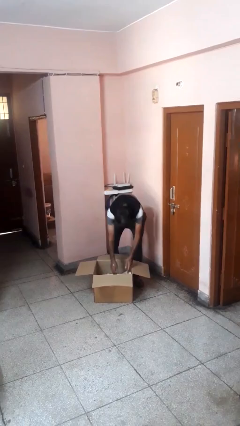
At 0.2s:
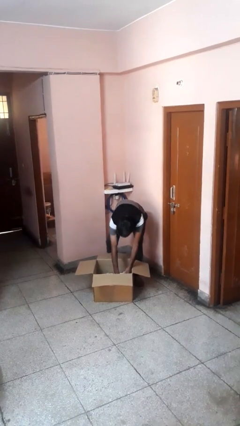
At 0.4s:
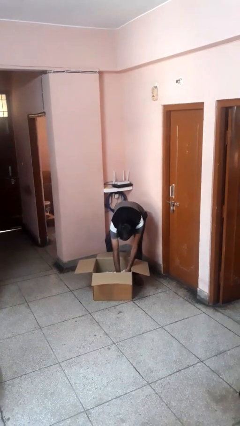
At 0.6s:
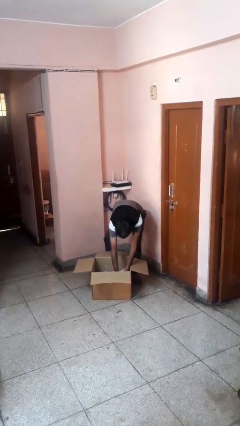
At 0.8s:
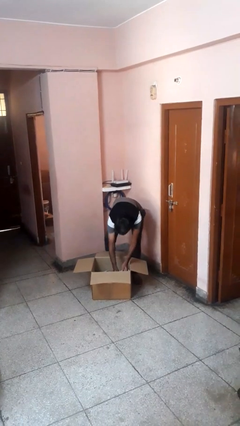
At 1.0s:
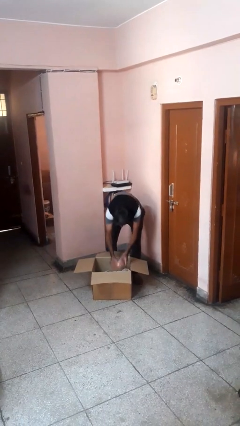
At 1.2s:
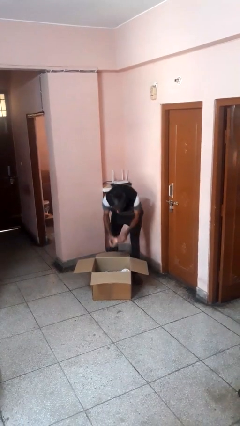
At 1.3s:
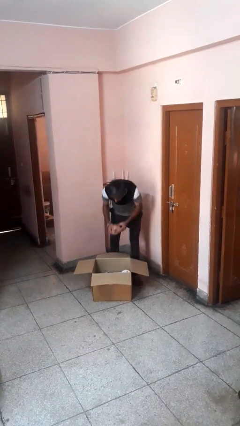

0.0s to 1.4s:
person takes object from box

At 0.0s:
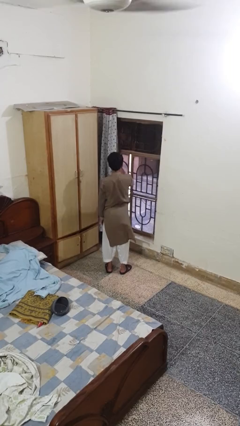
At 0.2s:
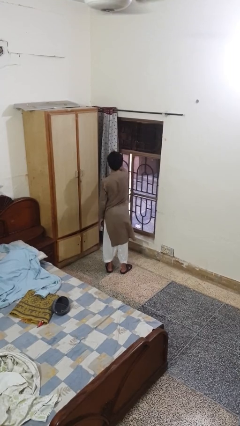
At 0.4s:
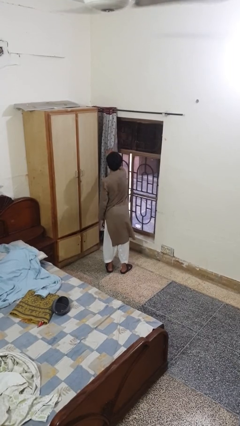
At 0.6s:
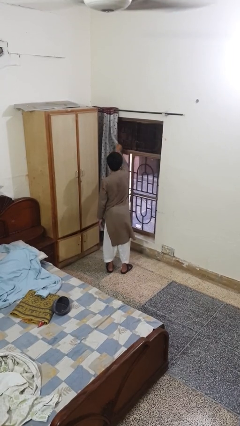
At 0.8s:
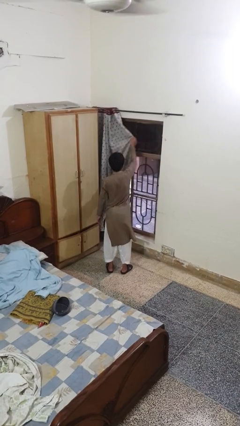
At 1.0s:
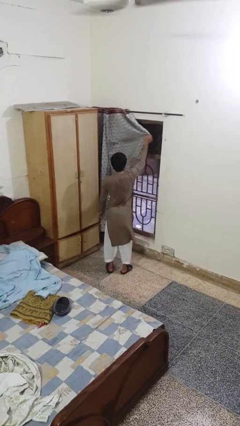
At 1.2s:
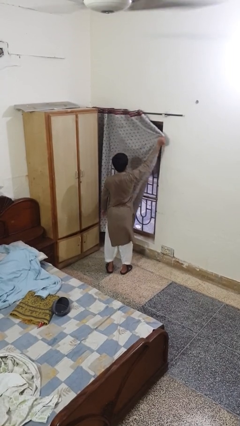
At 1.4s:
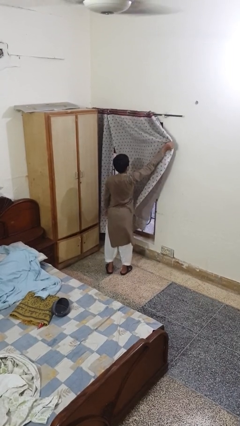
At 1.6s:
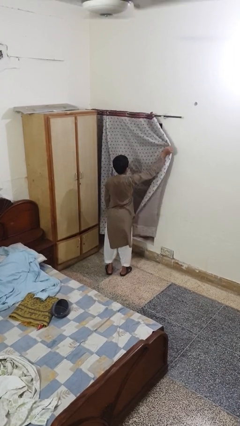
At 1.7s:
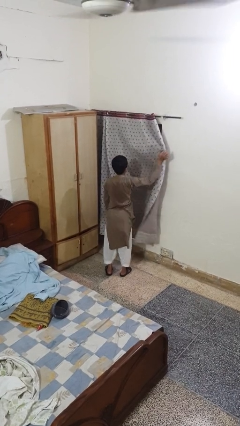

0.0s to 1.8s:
person closes curtains

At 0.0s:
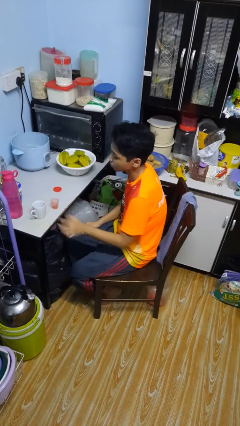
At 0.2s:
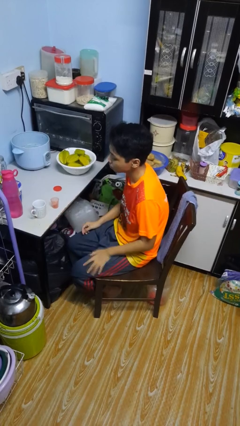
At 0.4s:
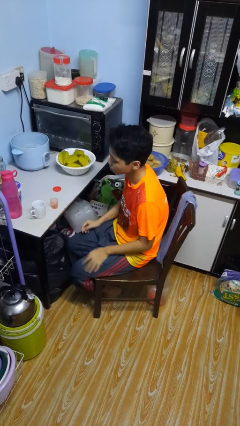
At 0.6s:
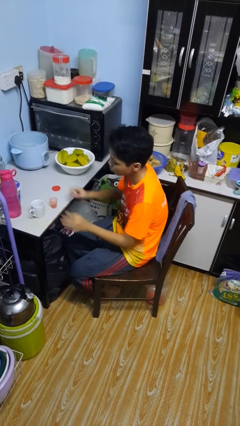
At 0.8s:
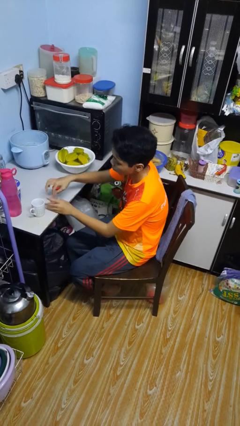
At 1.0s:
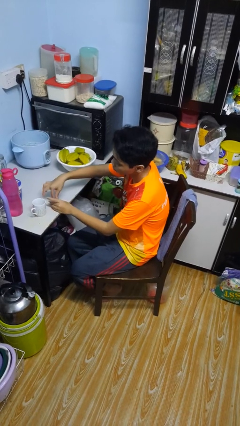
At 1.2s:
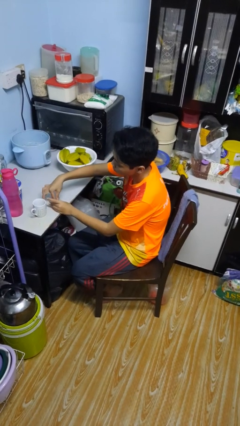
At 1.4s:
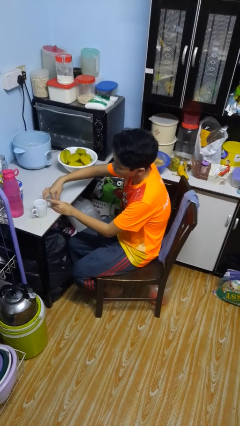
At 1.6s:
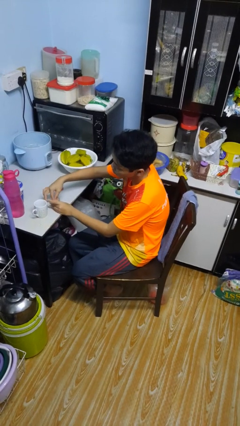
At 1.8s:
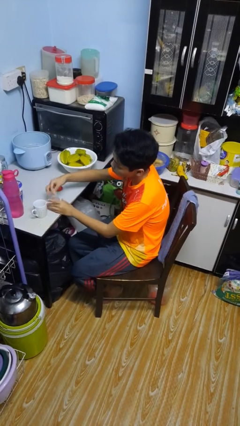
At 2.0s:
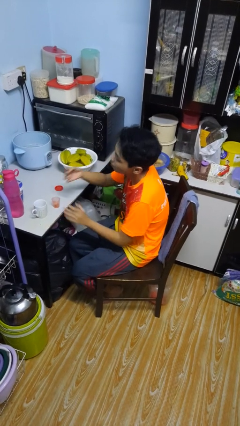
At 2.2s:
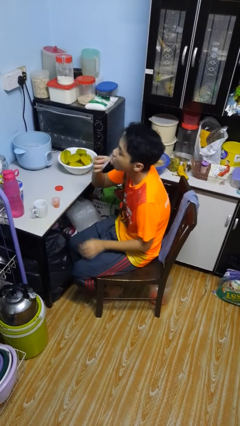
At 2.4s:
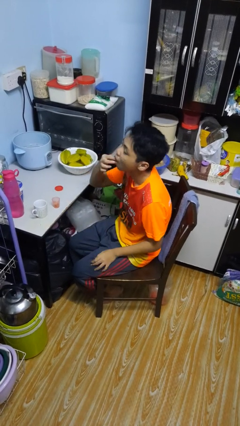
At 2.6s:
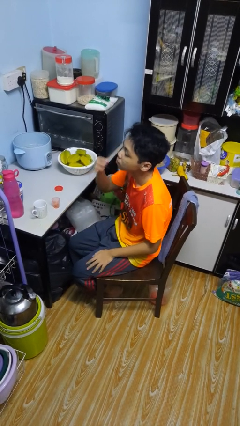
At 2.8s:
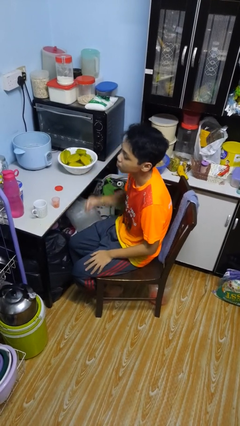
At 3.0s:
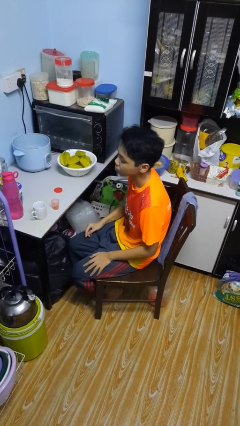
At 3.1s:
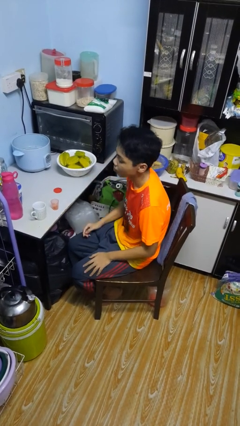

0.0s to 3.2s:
person takes medicine pills

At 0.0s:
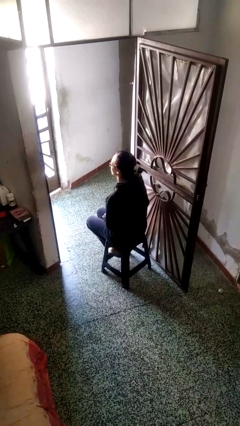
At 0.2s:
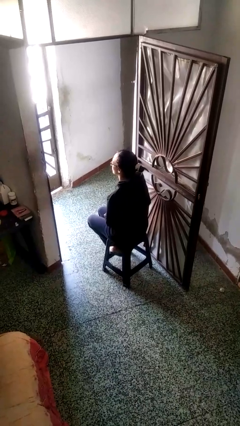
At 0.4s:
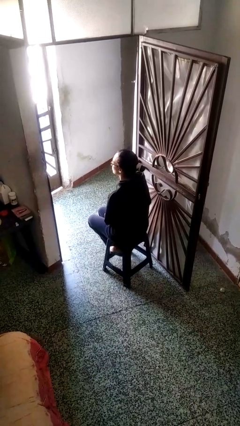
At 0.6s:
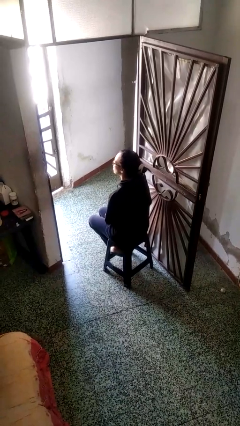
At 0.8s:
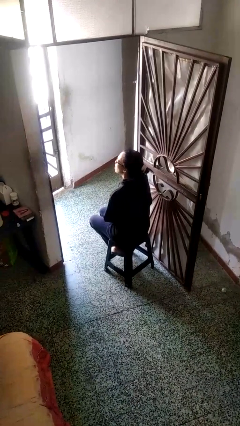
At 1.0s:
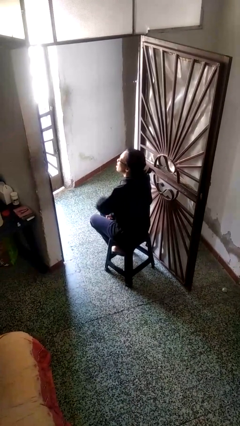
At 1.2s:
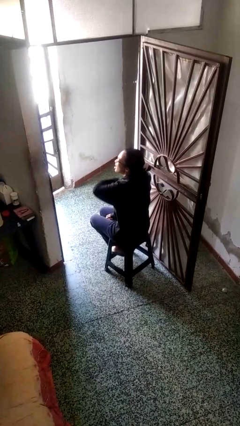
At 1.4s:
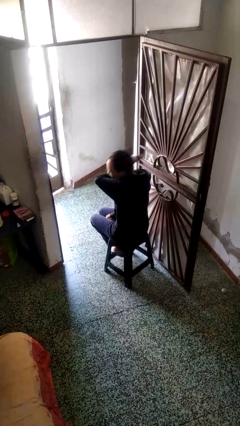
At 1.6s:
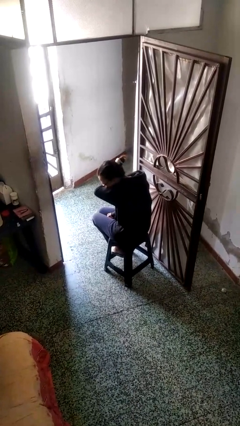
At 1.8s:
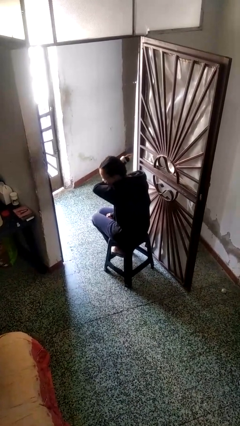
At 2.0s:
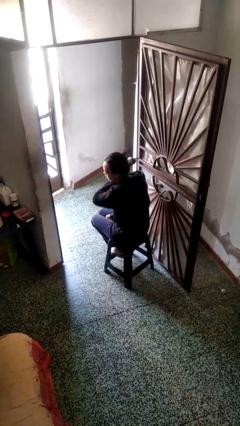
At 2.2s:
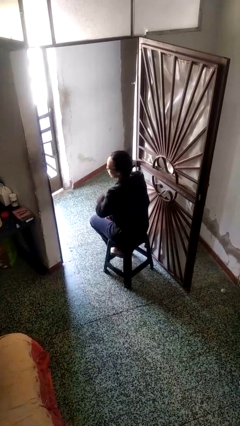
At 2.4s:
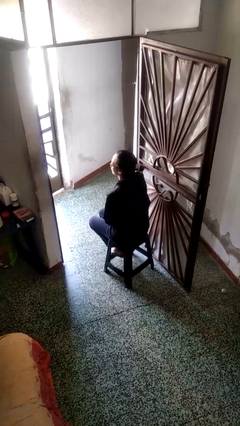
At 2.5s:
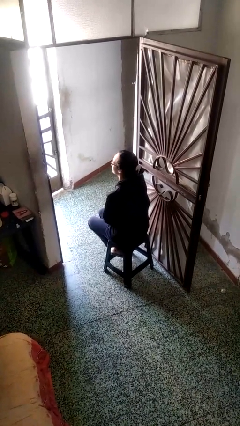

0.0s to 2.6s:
person sneezes into arm

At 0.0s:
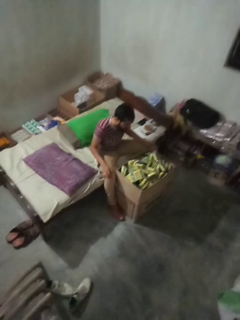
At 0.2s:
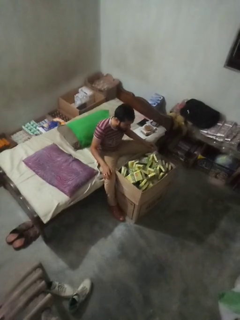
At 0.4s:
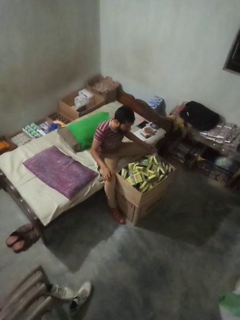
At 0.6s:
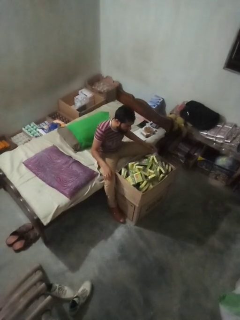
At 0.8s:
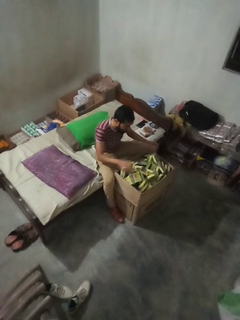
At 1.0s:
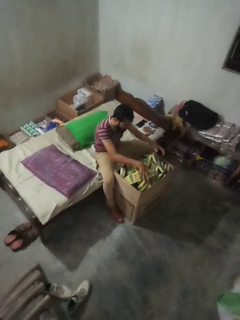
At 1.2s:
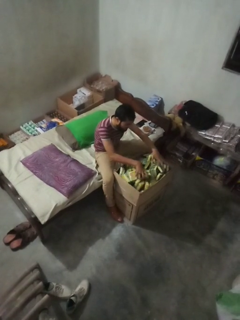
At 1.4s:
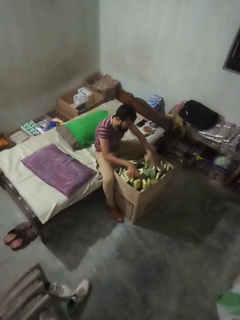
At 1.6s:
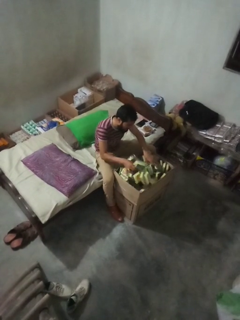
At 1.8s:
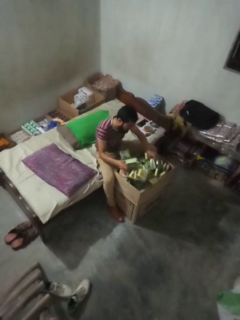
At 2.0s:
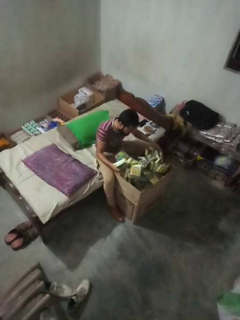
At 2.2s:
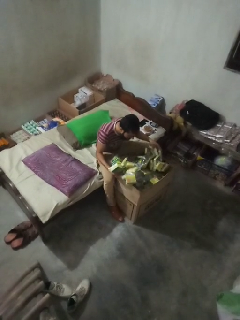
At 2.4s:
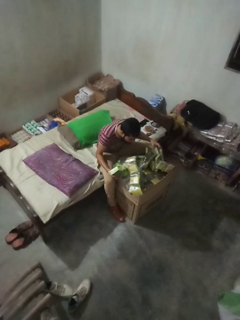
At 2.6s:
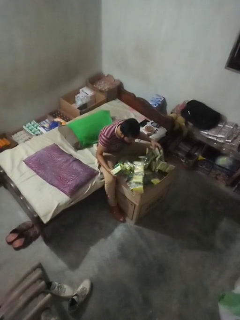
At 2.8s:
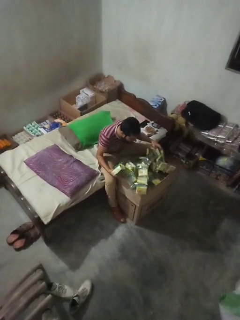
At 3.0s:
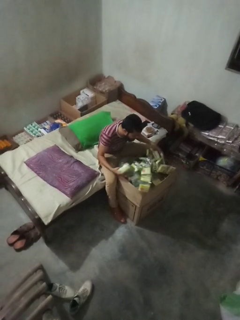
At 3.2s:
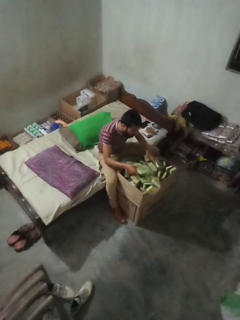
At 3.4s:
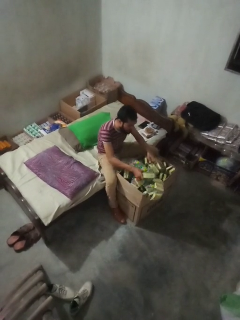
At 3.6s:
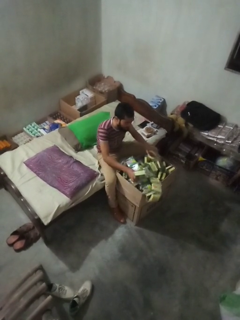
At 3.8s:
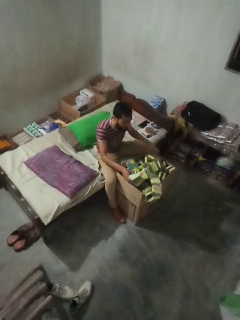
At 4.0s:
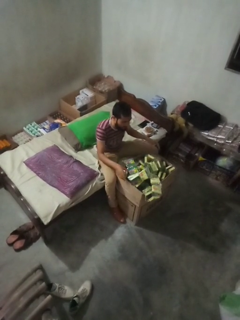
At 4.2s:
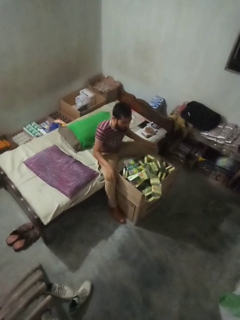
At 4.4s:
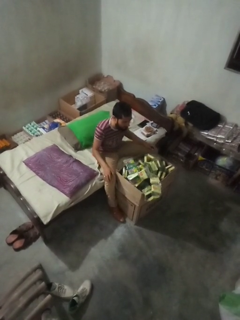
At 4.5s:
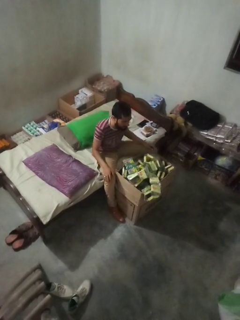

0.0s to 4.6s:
person searches in box

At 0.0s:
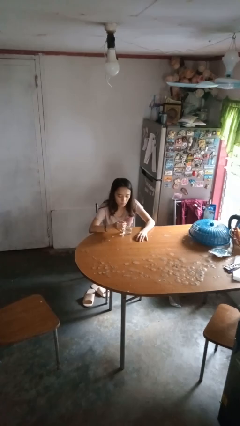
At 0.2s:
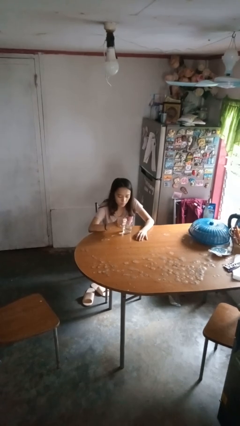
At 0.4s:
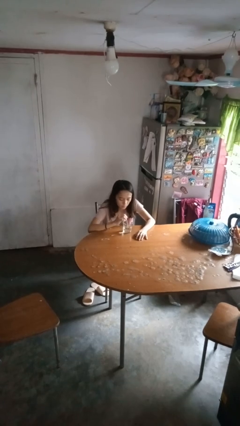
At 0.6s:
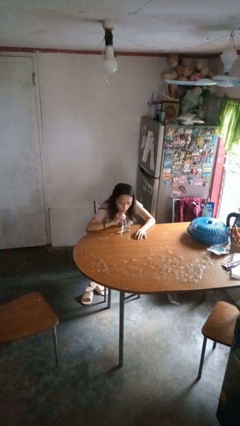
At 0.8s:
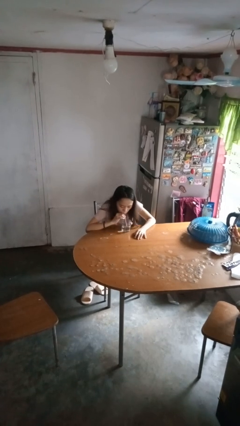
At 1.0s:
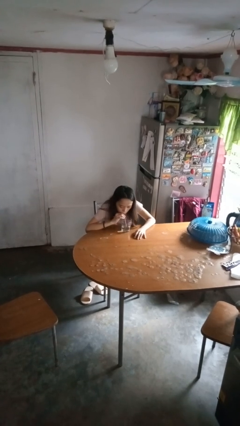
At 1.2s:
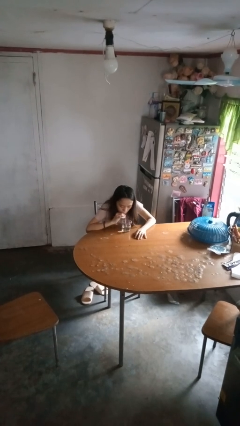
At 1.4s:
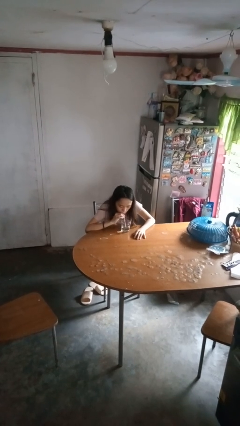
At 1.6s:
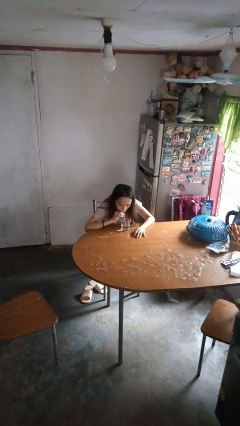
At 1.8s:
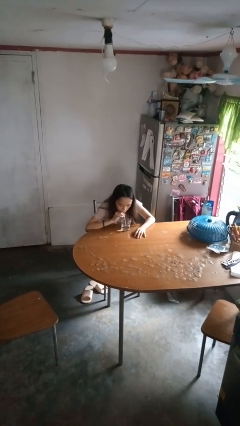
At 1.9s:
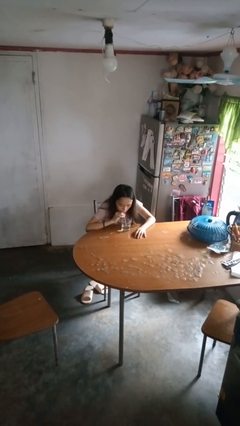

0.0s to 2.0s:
person drinks from straw

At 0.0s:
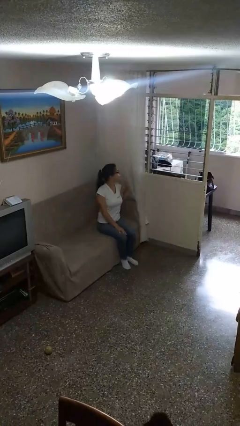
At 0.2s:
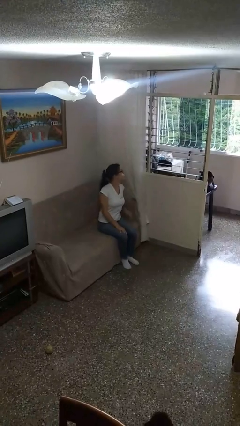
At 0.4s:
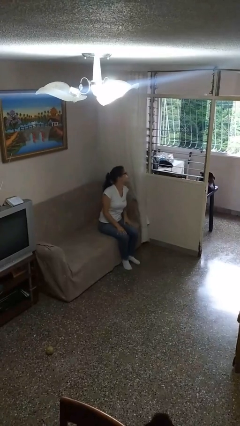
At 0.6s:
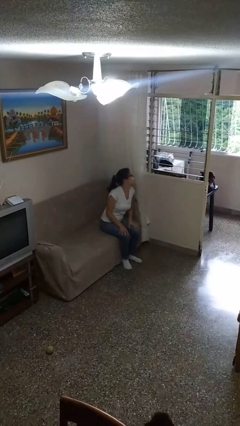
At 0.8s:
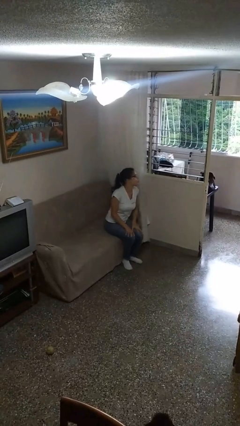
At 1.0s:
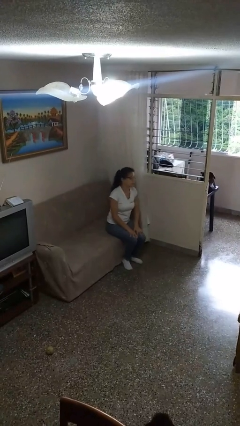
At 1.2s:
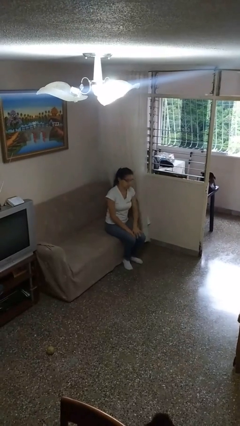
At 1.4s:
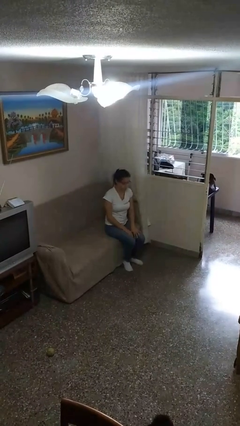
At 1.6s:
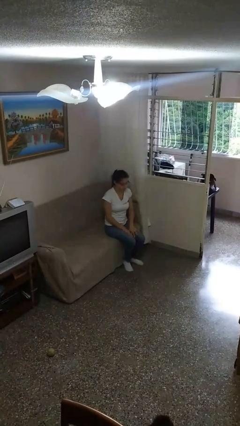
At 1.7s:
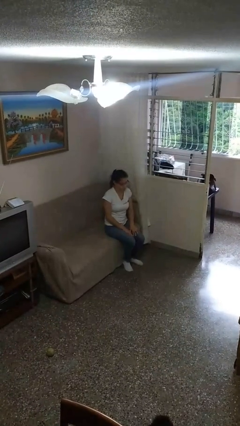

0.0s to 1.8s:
person gestures lower hand

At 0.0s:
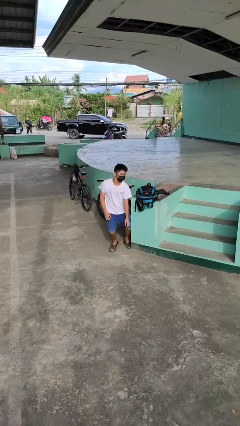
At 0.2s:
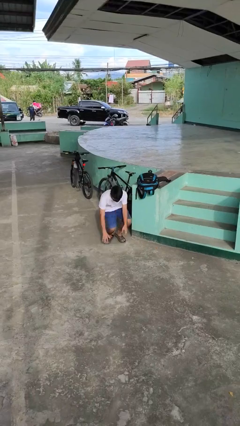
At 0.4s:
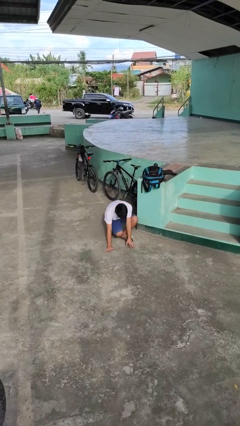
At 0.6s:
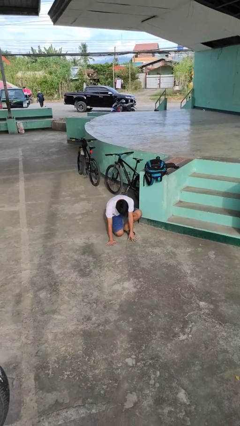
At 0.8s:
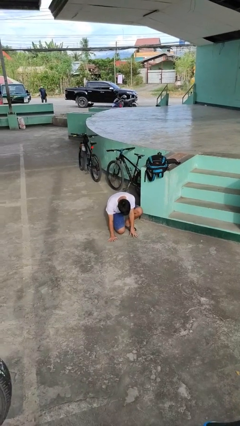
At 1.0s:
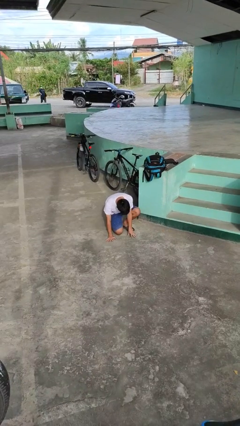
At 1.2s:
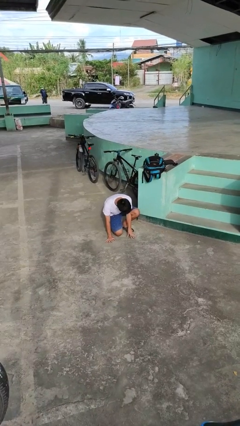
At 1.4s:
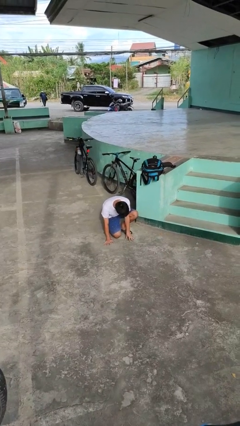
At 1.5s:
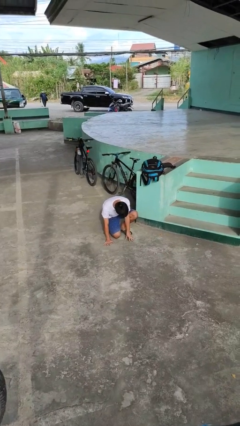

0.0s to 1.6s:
person trips on object on floor
